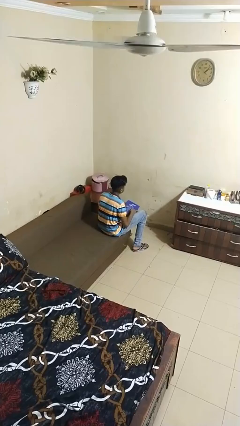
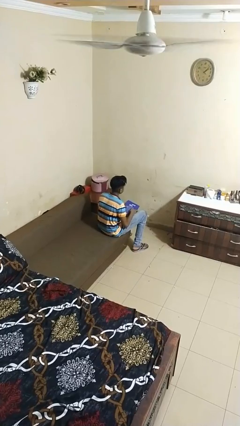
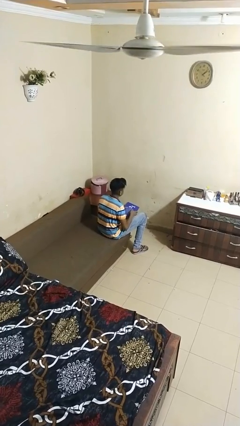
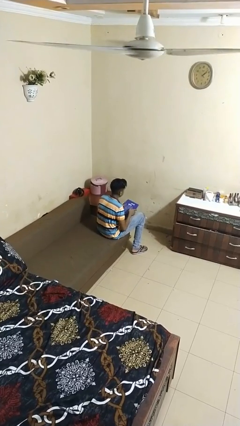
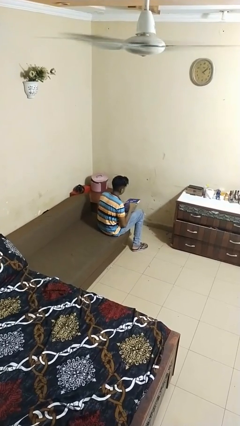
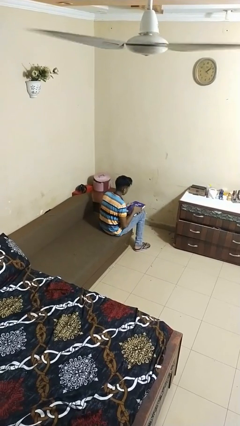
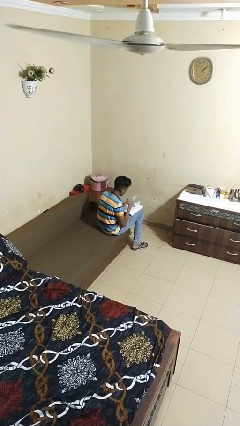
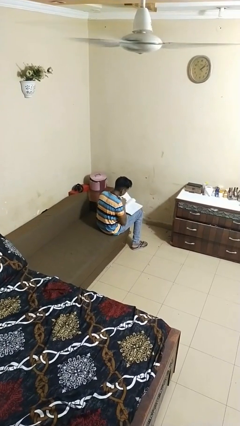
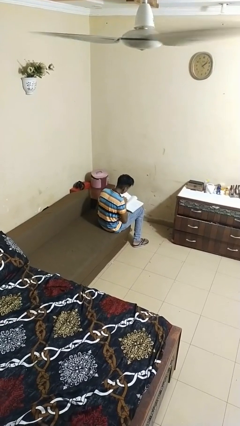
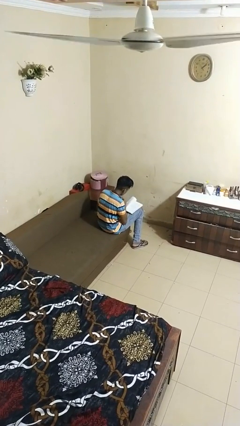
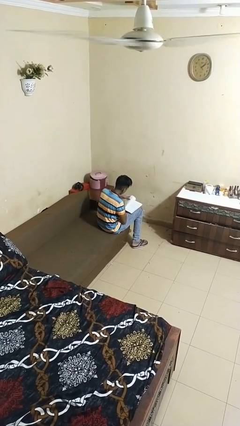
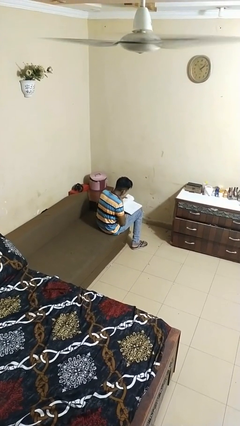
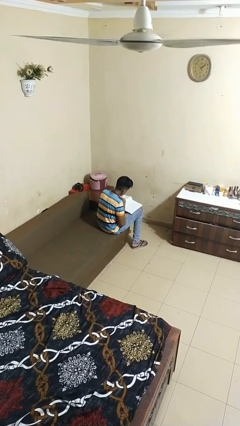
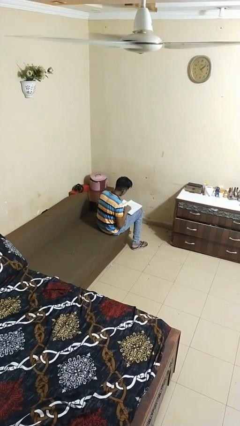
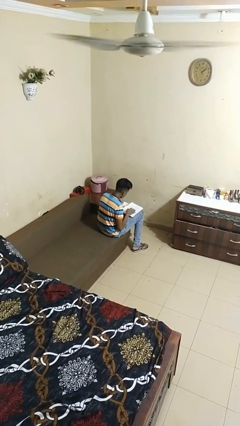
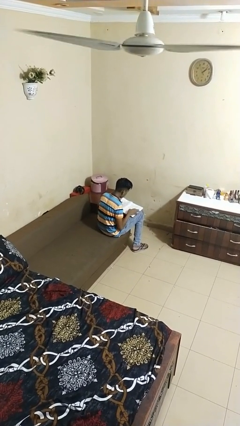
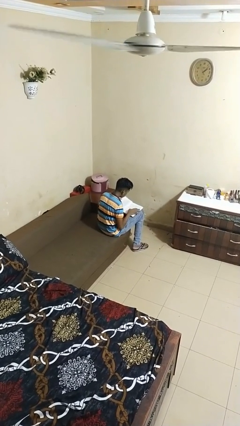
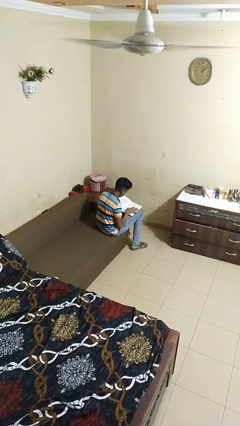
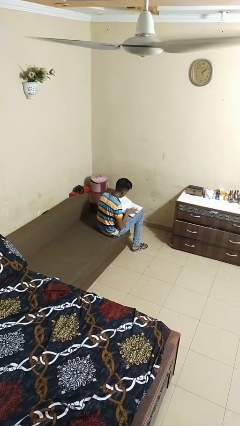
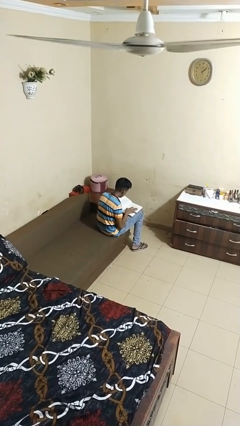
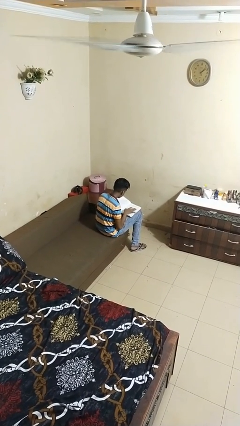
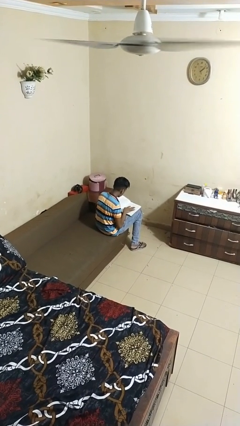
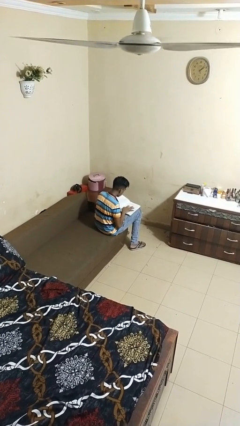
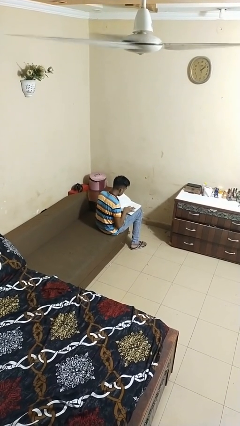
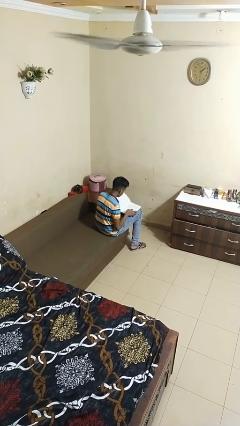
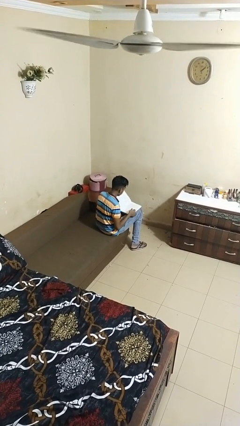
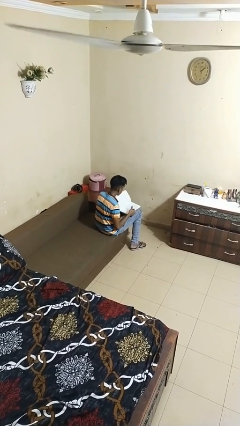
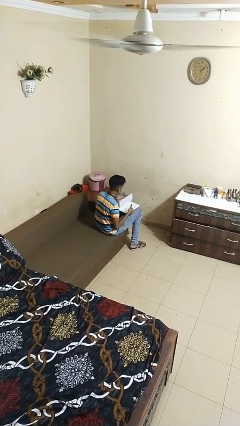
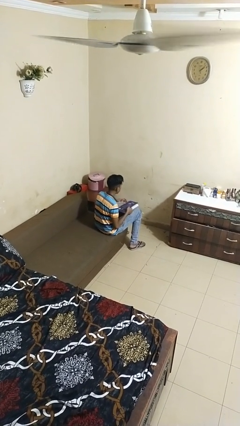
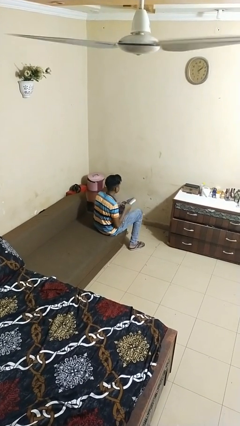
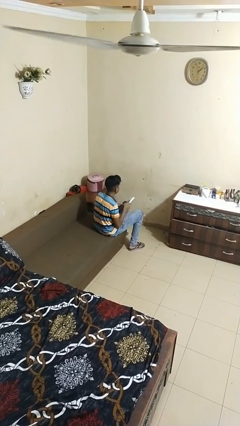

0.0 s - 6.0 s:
person reads book

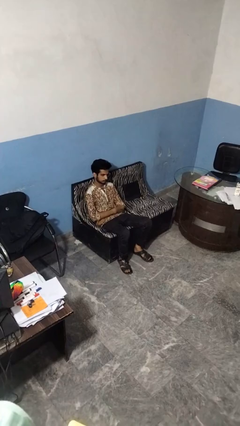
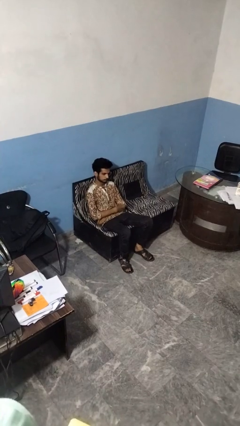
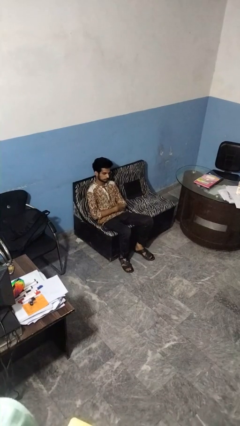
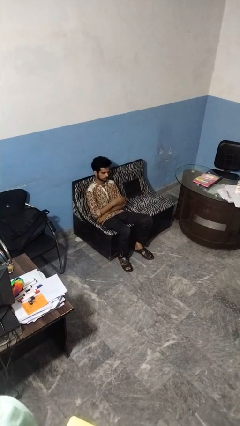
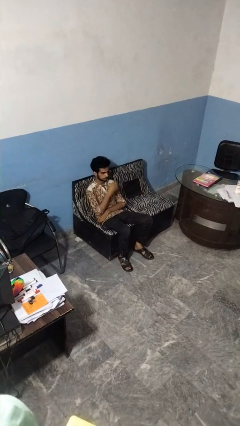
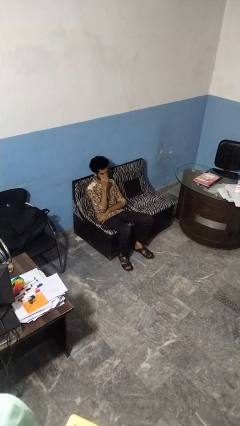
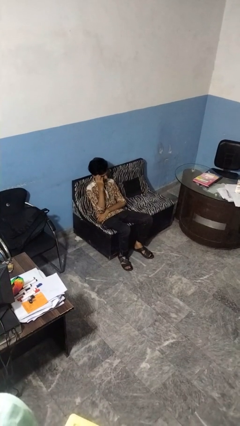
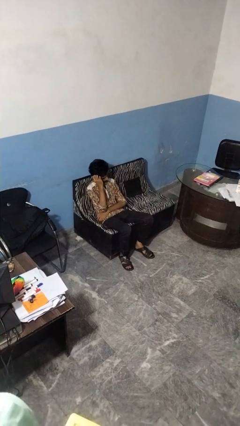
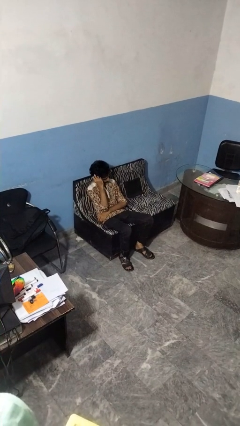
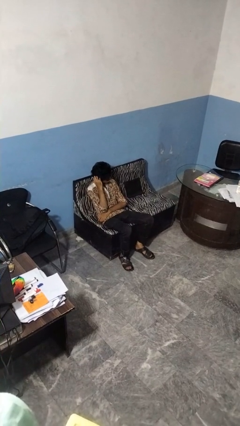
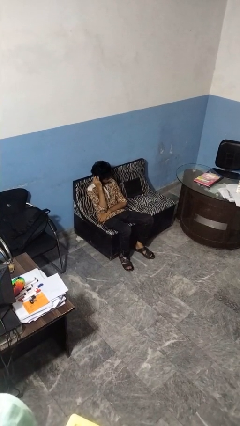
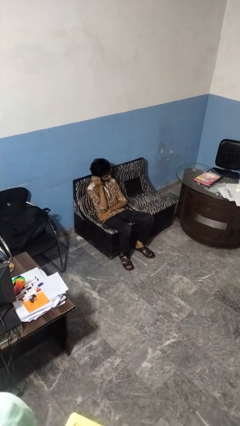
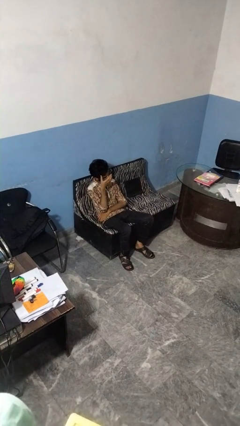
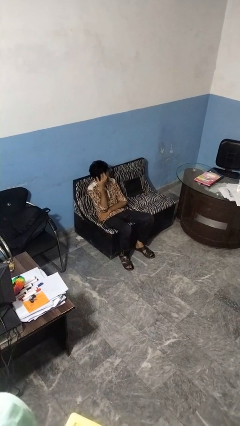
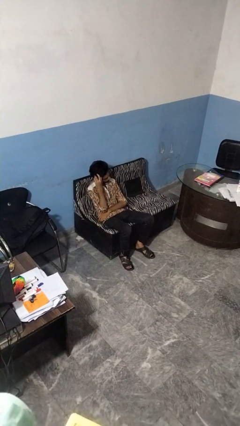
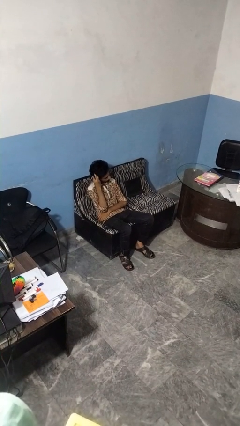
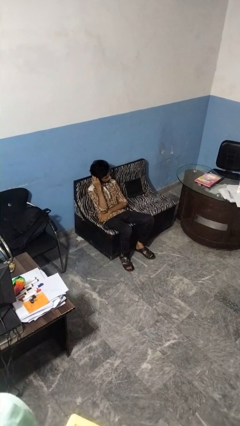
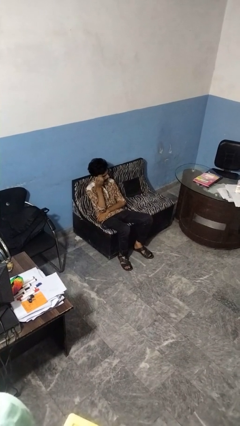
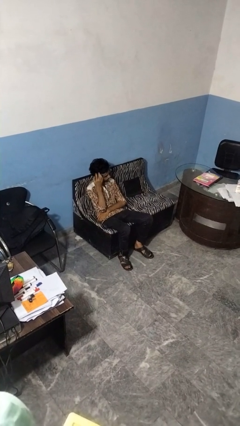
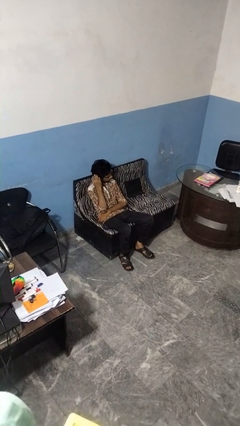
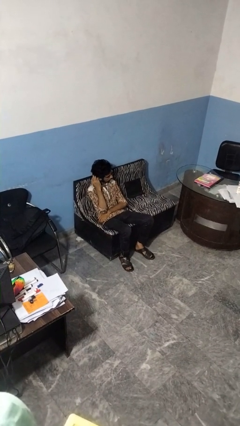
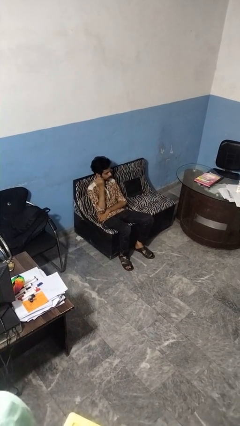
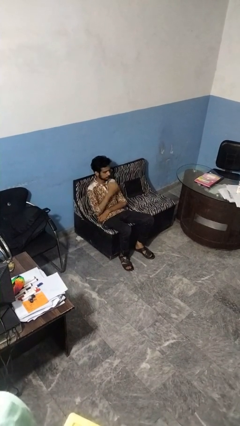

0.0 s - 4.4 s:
person strokes hair

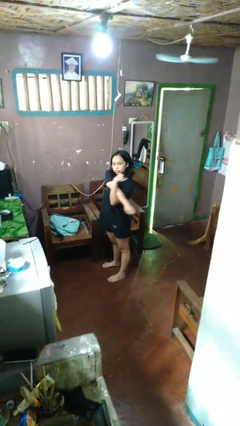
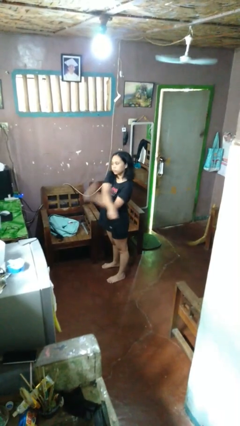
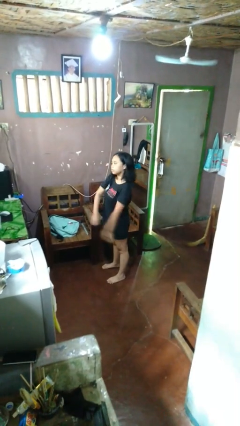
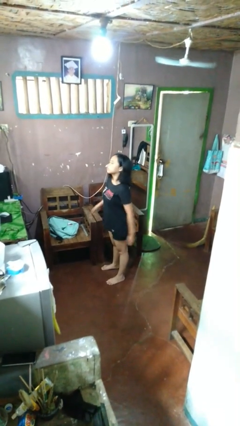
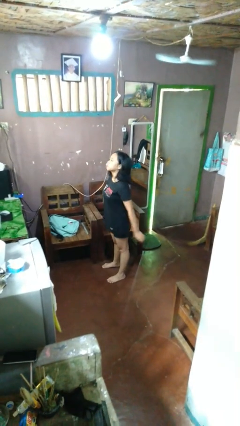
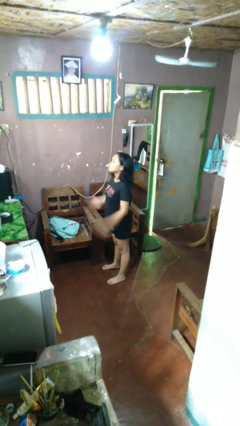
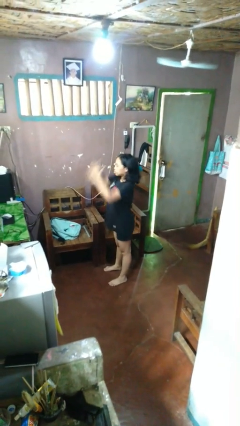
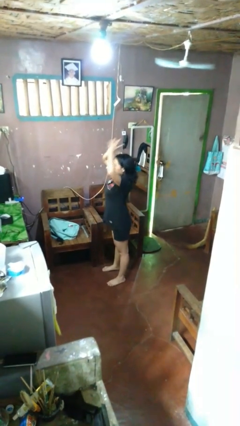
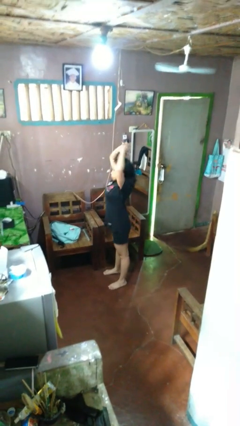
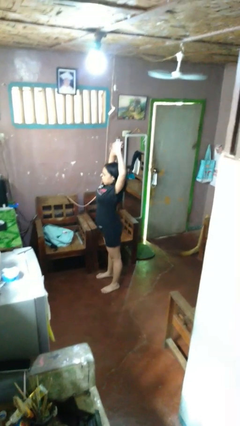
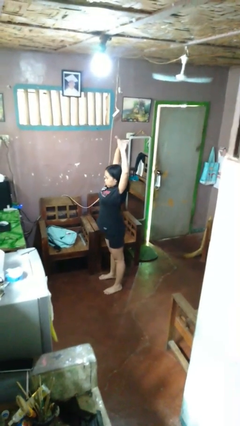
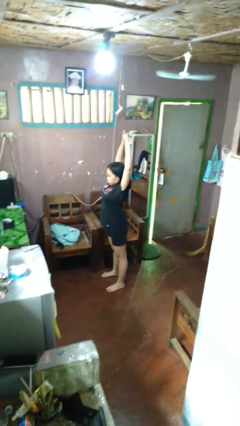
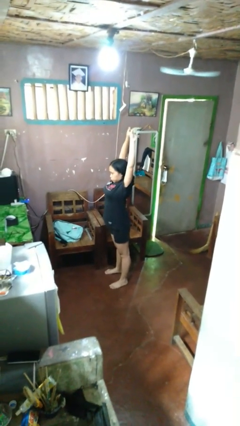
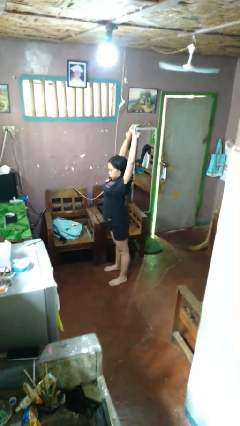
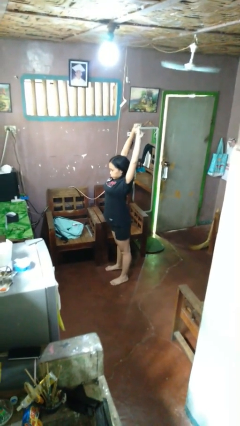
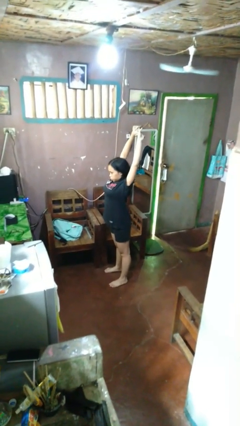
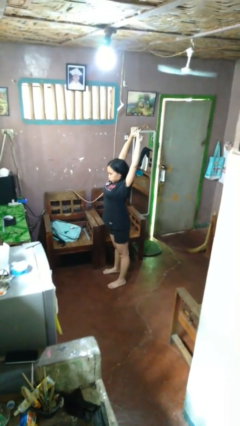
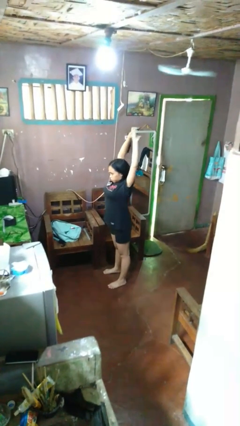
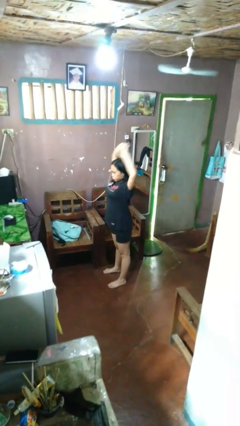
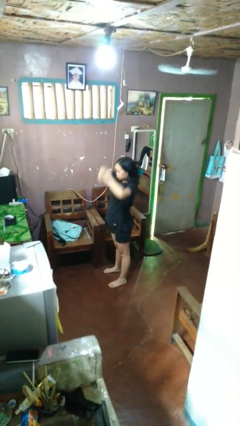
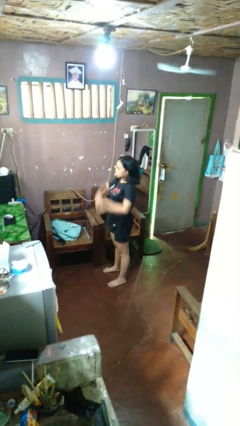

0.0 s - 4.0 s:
person stretches arms over head

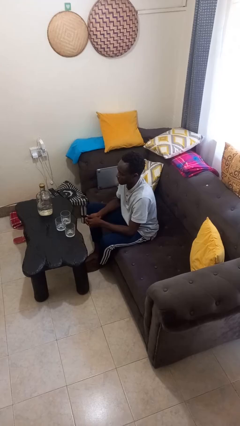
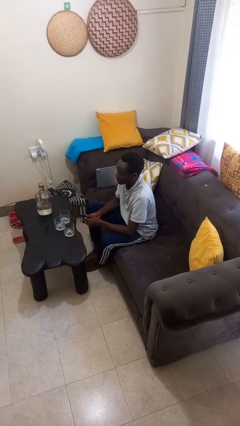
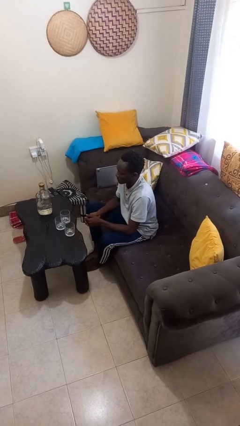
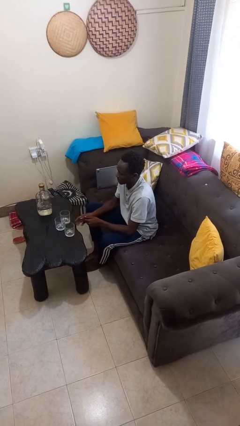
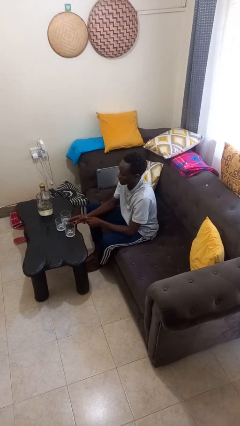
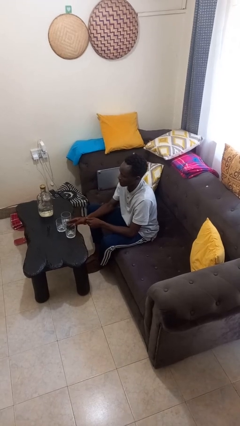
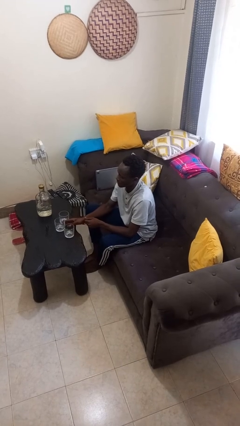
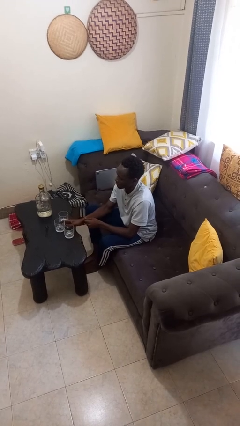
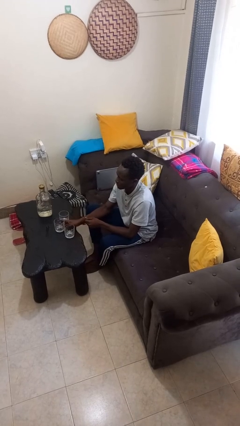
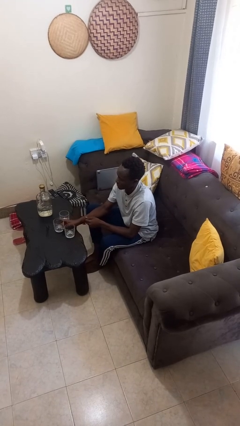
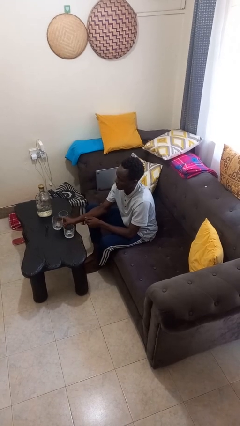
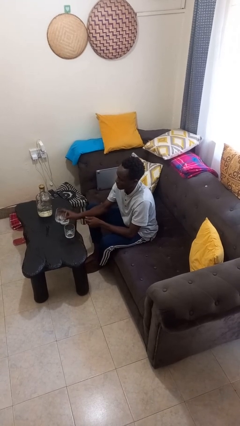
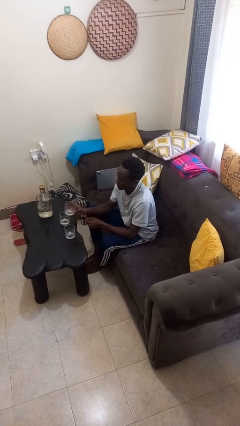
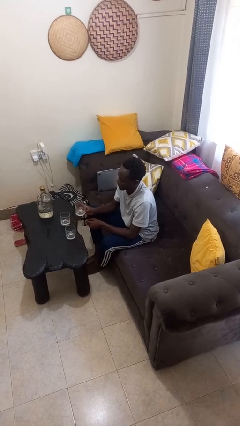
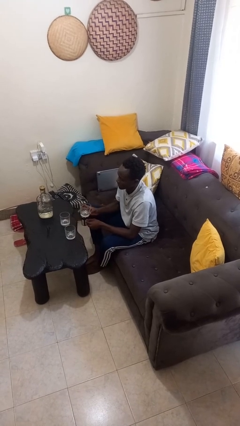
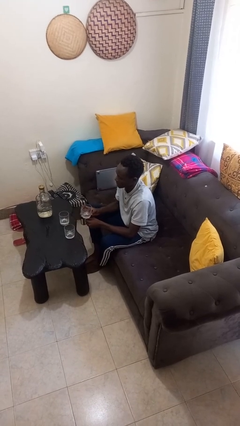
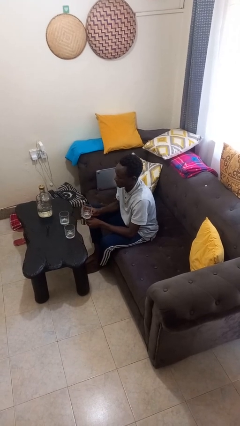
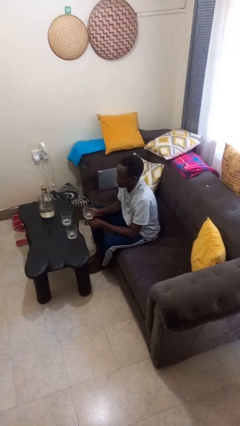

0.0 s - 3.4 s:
person picks up object from table
